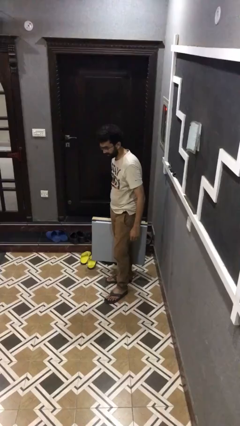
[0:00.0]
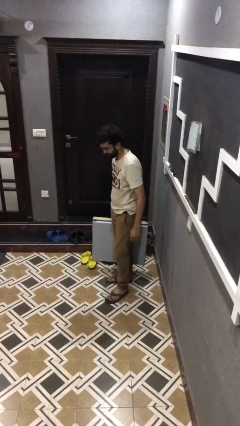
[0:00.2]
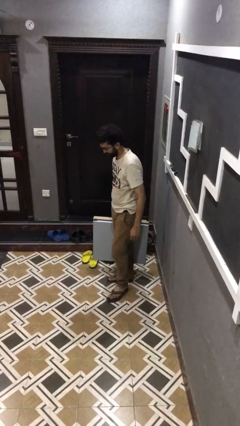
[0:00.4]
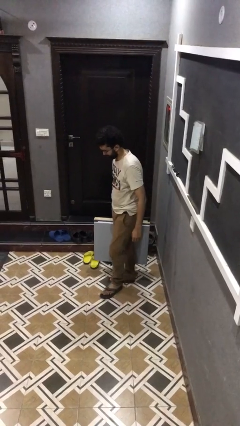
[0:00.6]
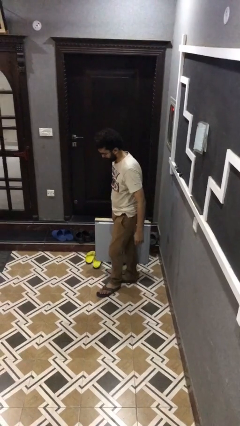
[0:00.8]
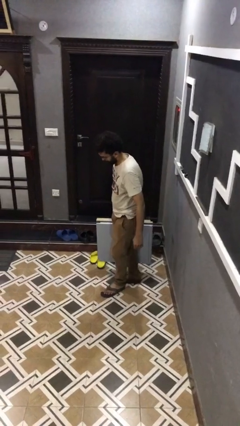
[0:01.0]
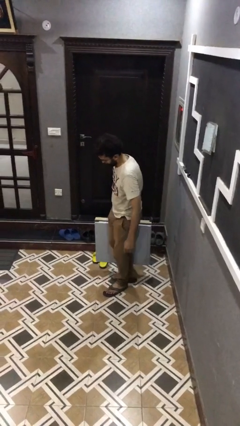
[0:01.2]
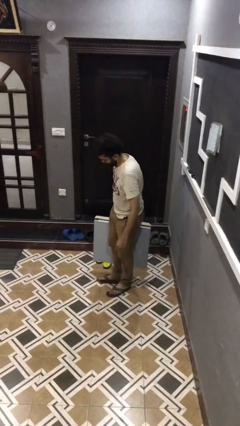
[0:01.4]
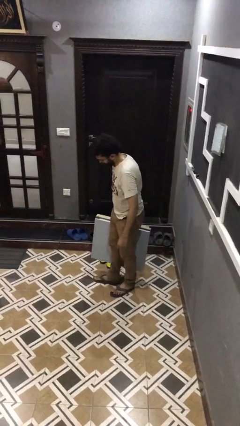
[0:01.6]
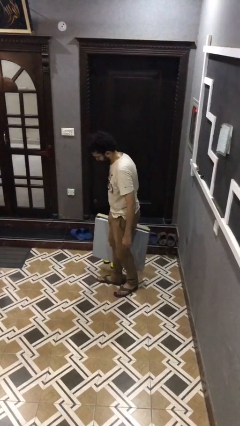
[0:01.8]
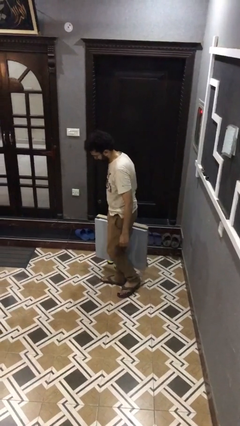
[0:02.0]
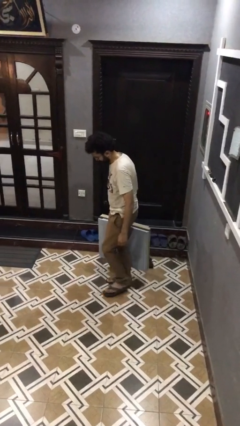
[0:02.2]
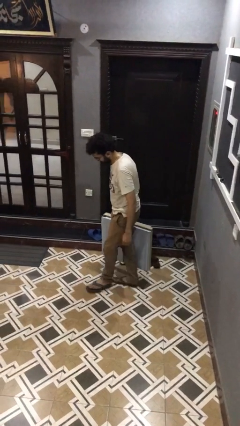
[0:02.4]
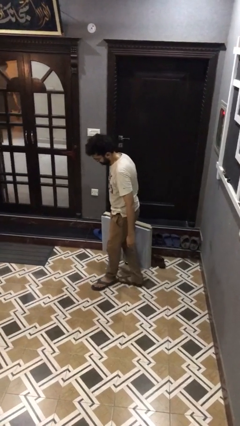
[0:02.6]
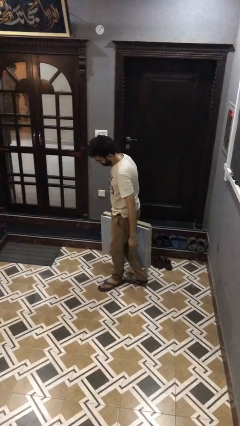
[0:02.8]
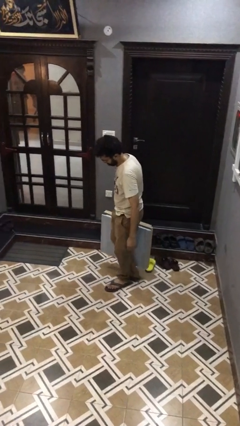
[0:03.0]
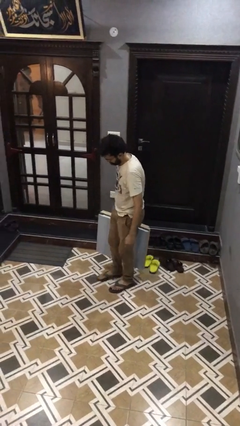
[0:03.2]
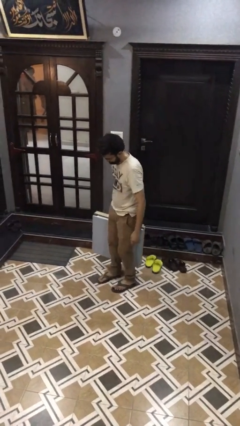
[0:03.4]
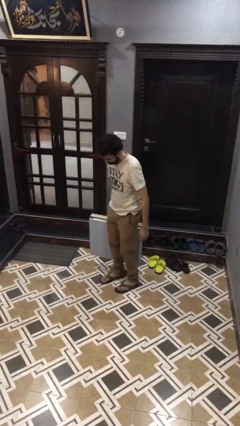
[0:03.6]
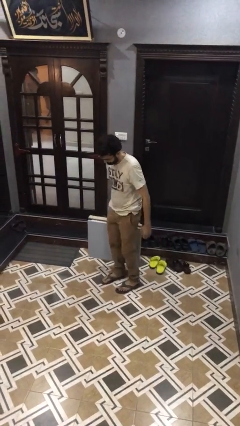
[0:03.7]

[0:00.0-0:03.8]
person carries heavy object

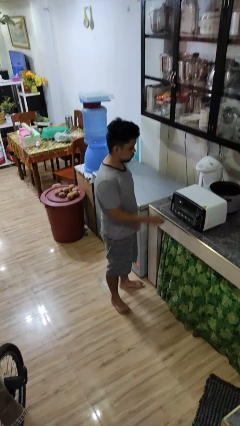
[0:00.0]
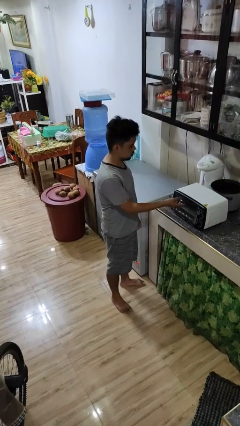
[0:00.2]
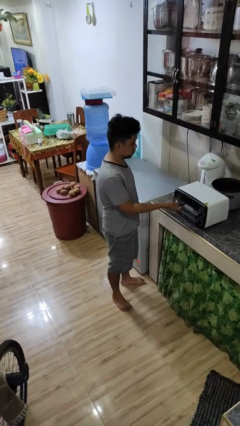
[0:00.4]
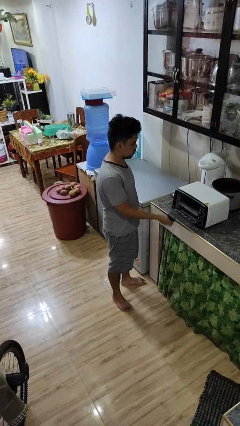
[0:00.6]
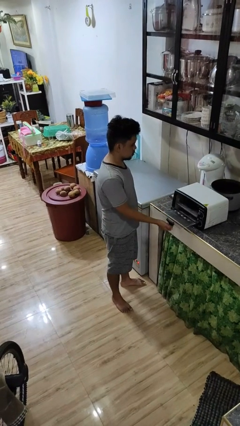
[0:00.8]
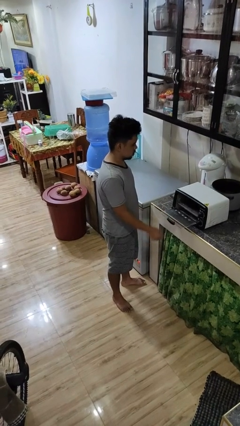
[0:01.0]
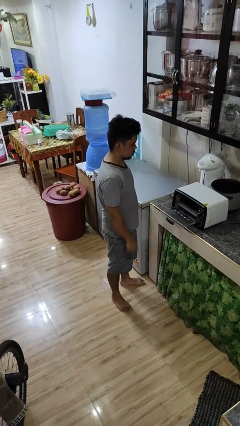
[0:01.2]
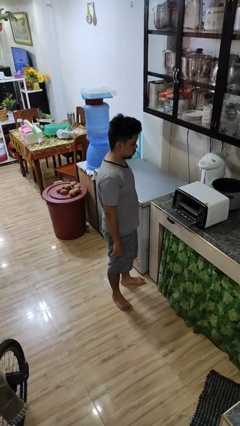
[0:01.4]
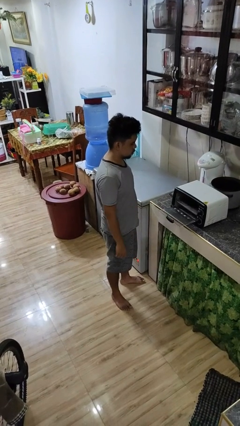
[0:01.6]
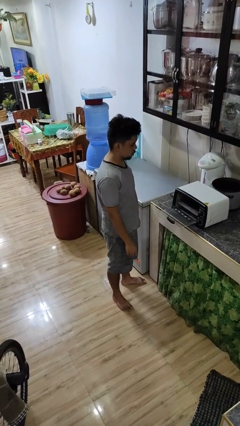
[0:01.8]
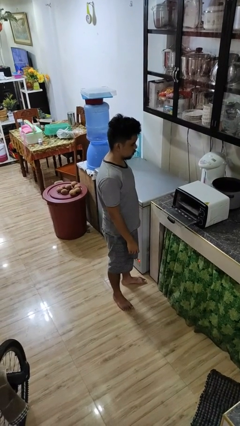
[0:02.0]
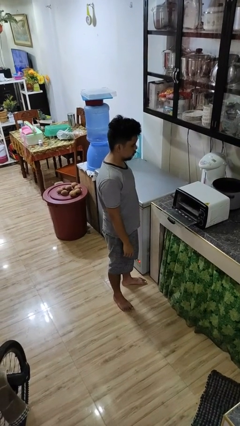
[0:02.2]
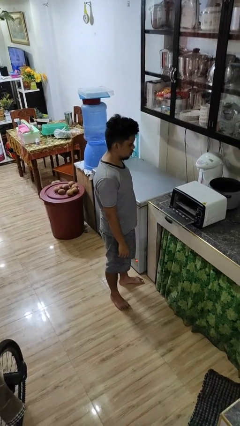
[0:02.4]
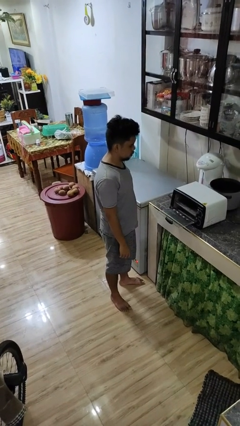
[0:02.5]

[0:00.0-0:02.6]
person opens microwave

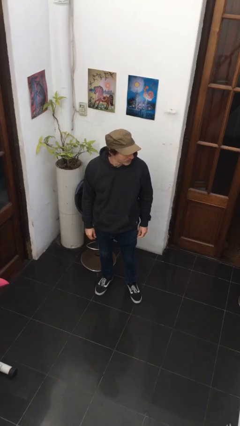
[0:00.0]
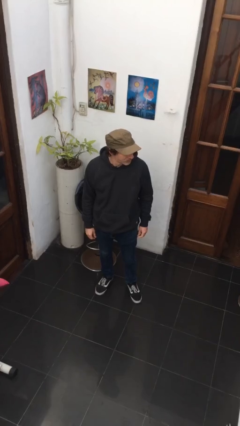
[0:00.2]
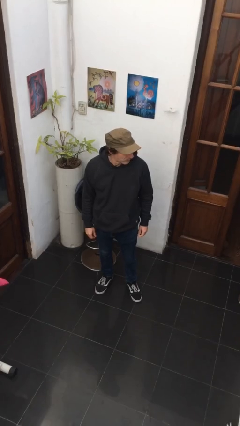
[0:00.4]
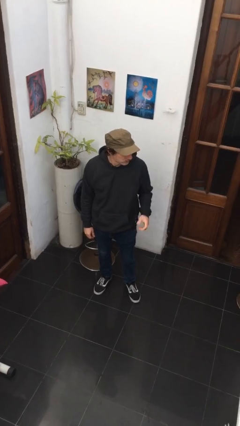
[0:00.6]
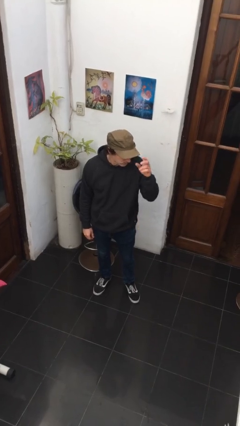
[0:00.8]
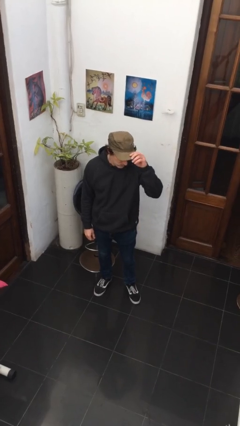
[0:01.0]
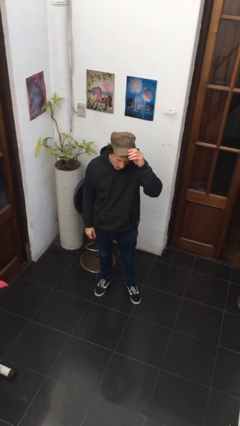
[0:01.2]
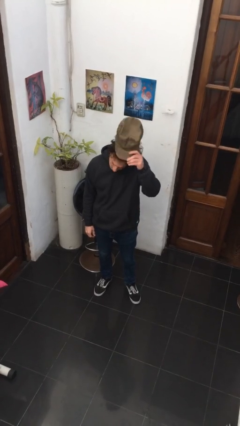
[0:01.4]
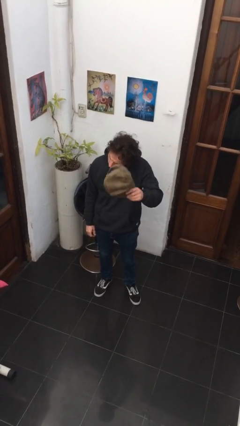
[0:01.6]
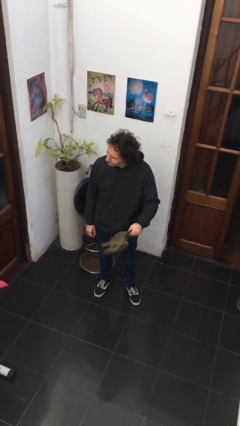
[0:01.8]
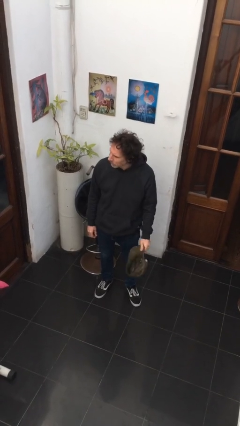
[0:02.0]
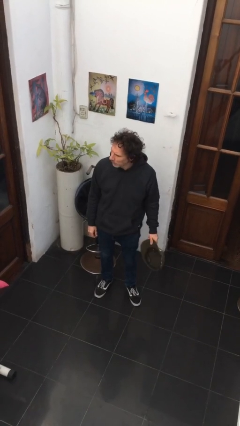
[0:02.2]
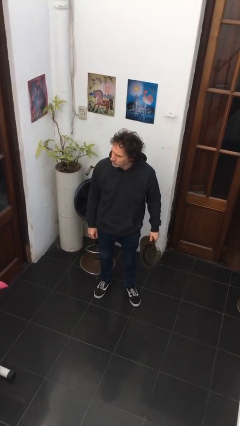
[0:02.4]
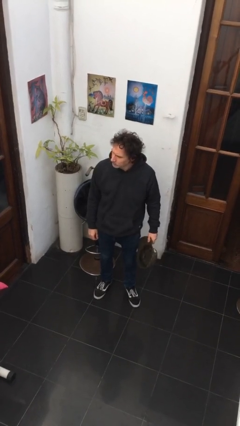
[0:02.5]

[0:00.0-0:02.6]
person takes off hat

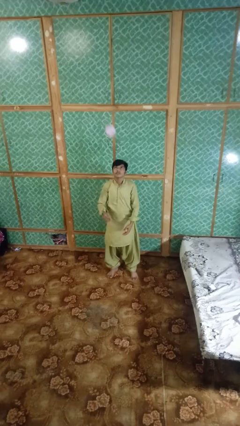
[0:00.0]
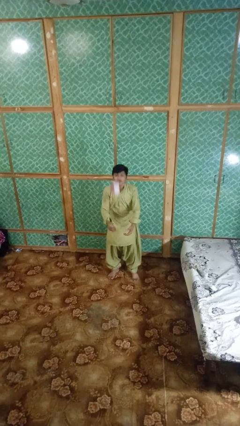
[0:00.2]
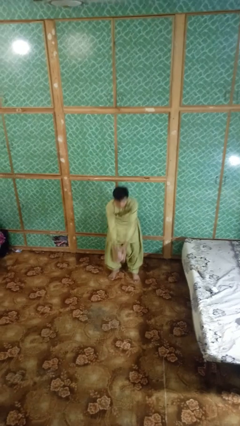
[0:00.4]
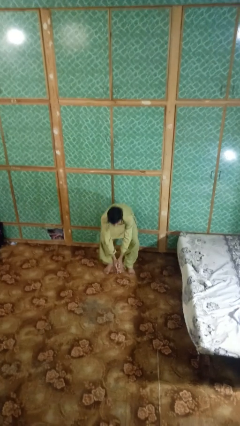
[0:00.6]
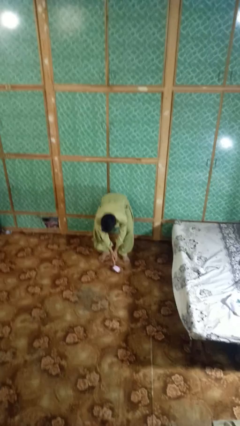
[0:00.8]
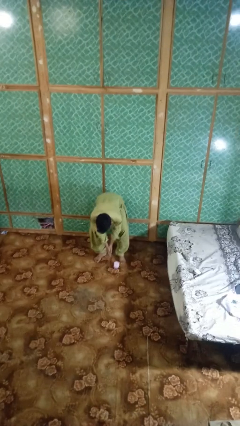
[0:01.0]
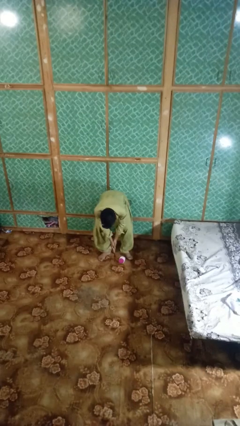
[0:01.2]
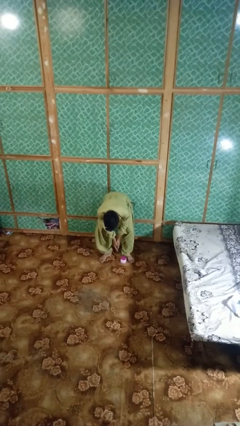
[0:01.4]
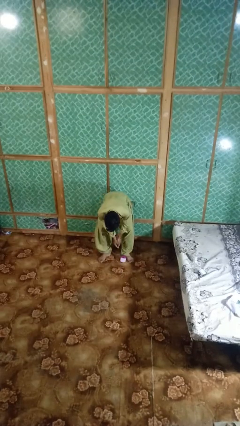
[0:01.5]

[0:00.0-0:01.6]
person catches dropped object

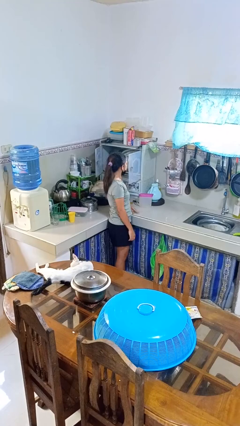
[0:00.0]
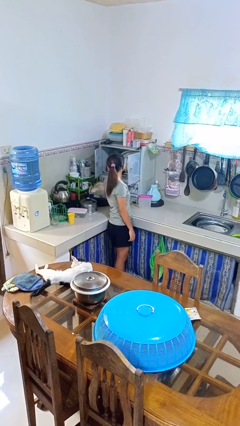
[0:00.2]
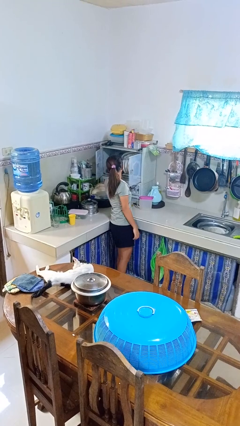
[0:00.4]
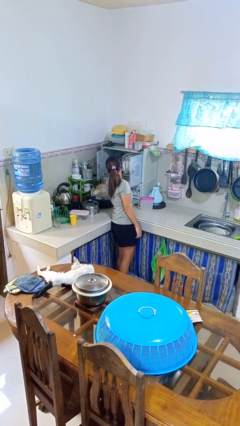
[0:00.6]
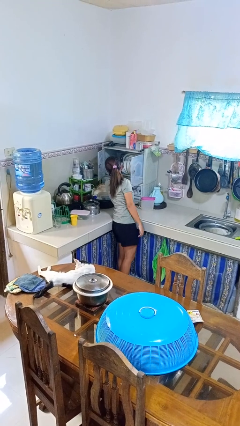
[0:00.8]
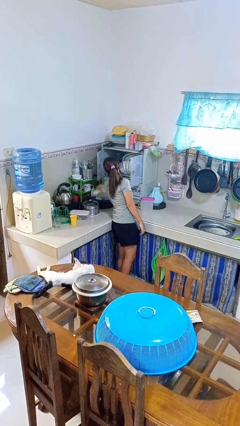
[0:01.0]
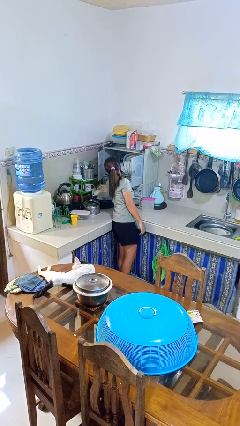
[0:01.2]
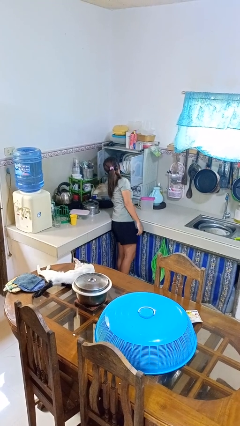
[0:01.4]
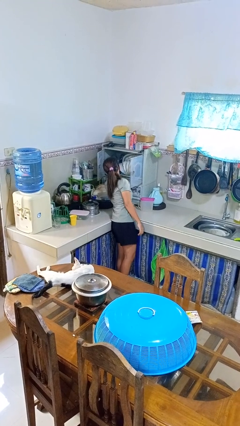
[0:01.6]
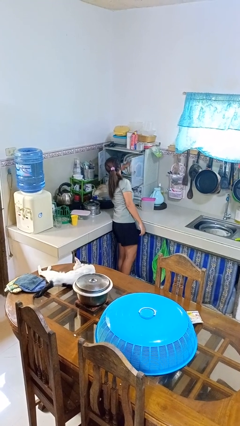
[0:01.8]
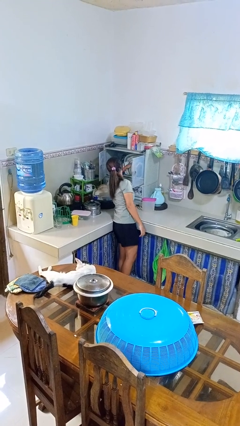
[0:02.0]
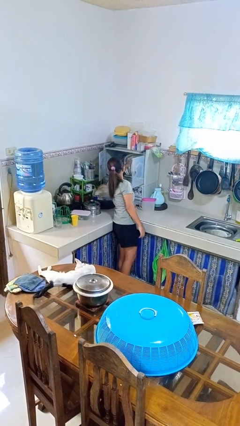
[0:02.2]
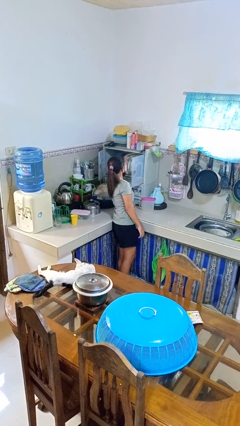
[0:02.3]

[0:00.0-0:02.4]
person searches in kitchen drawer

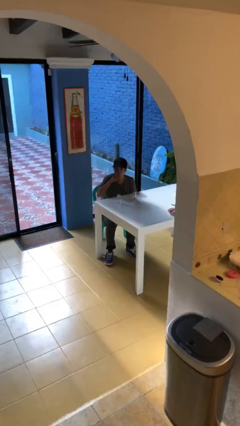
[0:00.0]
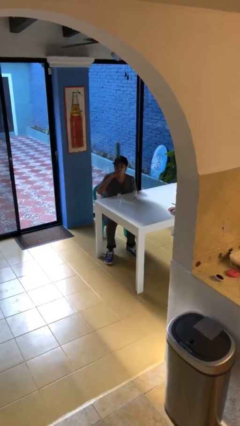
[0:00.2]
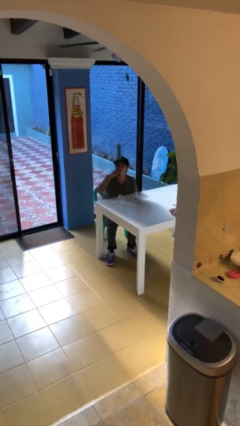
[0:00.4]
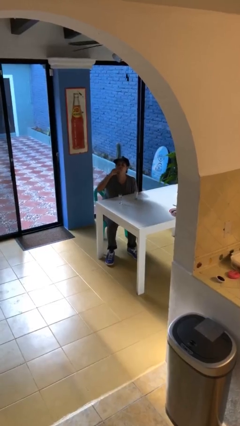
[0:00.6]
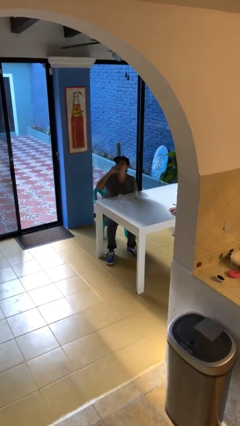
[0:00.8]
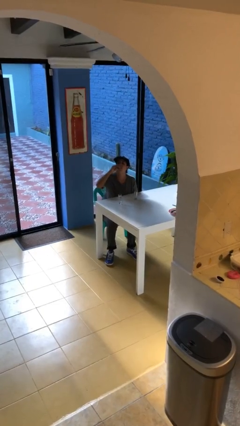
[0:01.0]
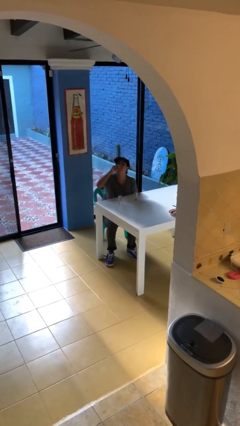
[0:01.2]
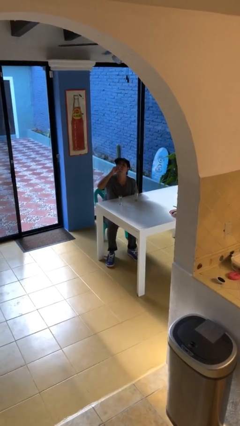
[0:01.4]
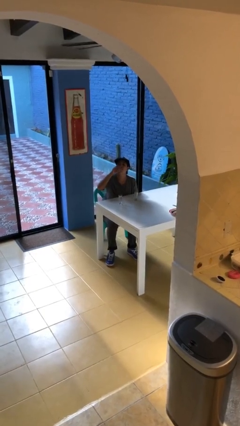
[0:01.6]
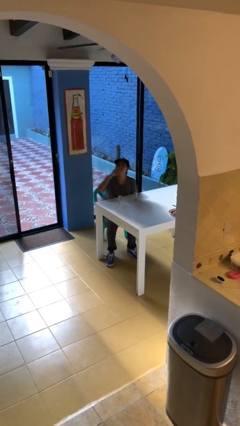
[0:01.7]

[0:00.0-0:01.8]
person drinks from shotglass

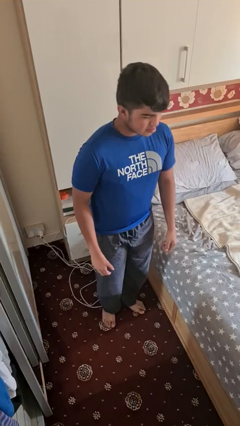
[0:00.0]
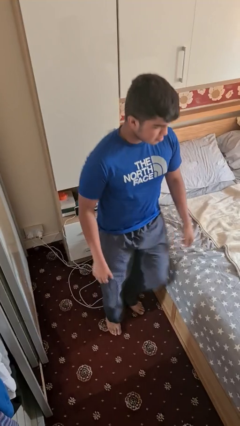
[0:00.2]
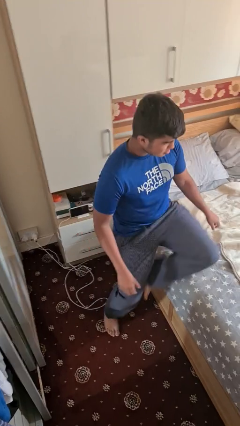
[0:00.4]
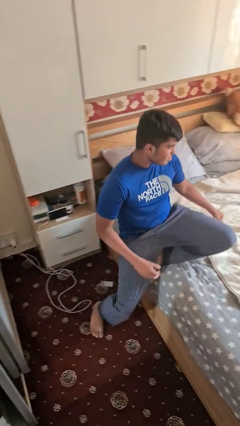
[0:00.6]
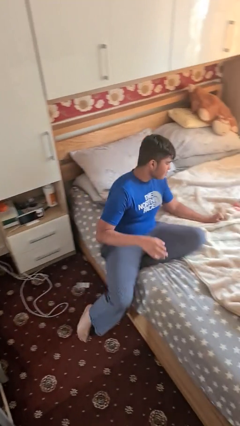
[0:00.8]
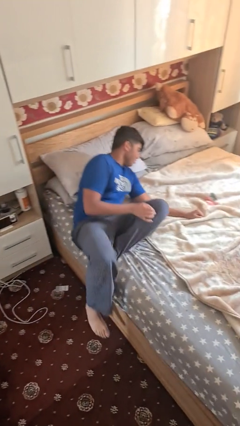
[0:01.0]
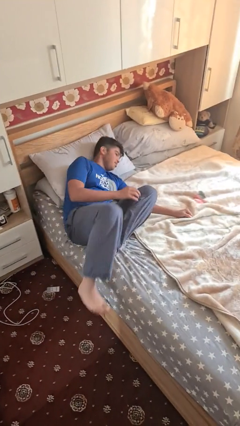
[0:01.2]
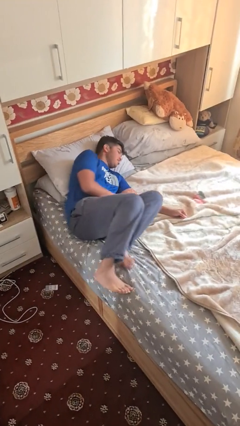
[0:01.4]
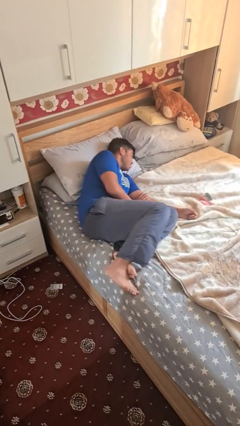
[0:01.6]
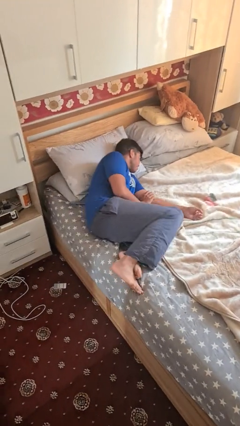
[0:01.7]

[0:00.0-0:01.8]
person lies down on bed

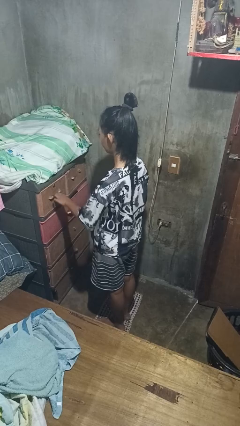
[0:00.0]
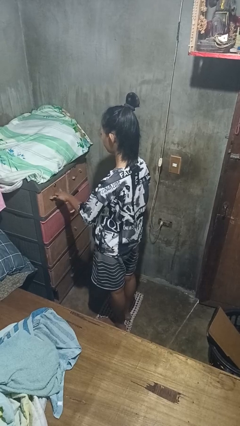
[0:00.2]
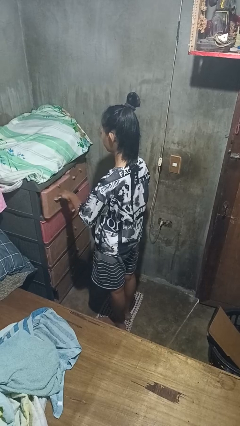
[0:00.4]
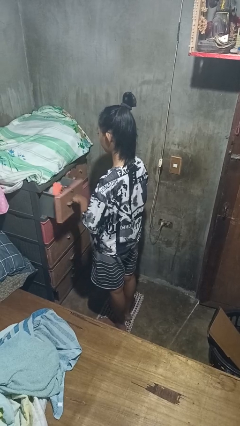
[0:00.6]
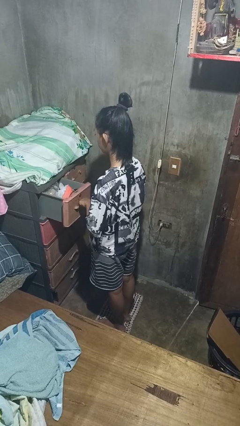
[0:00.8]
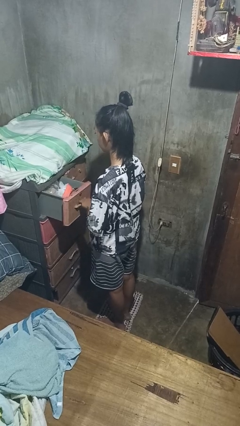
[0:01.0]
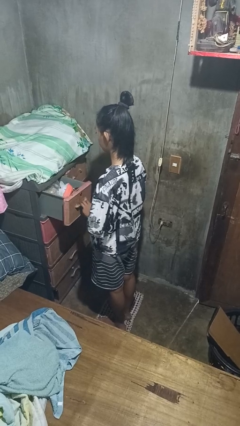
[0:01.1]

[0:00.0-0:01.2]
person opens dresser drawer
